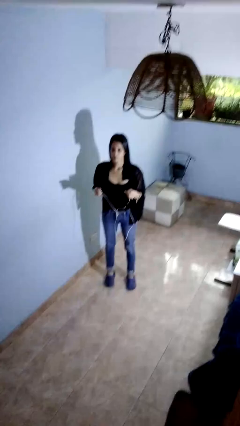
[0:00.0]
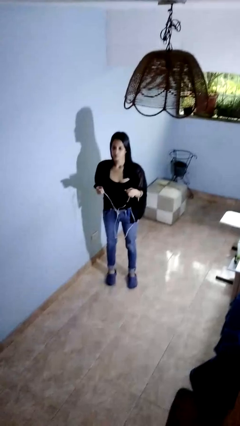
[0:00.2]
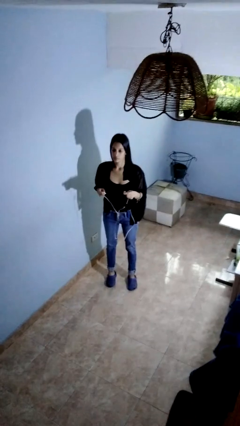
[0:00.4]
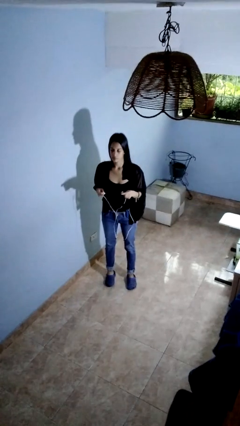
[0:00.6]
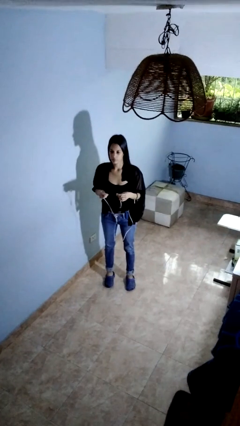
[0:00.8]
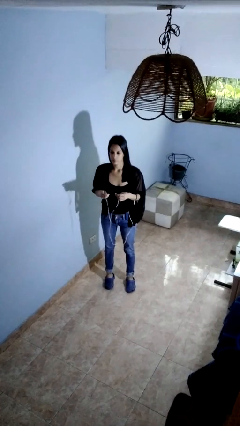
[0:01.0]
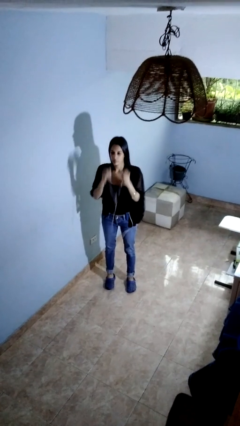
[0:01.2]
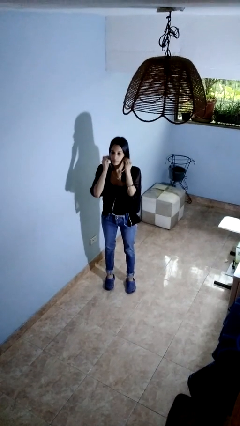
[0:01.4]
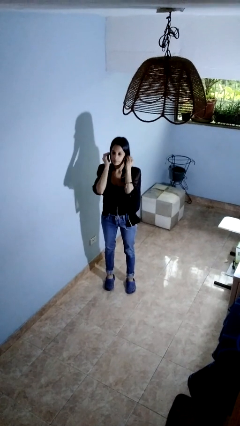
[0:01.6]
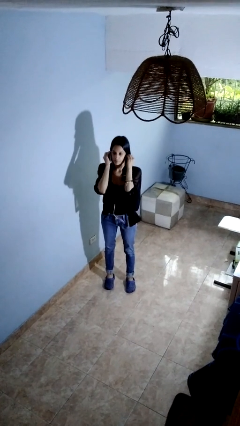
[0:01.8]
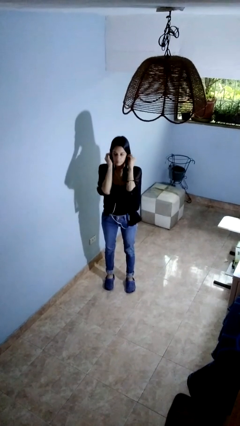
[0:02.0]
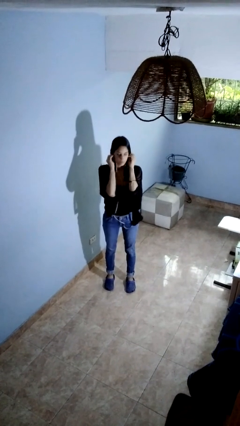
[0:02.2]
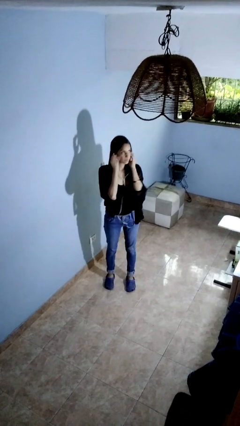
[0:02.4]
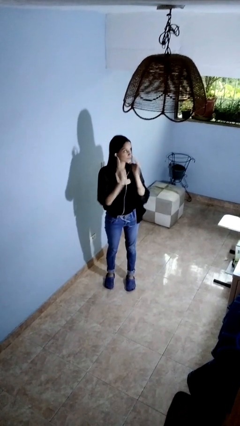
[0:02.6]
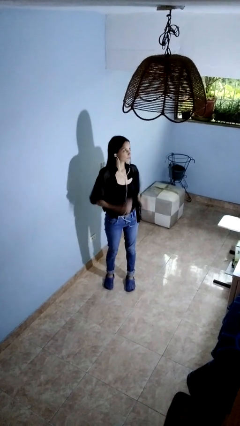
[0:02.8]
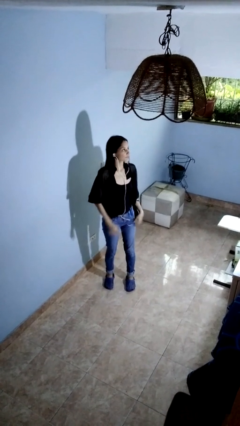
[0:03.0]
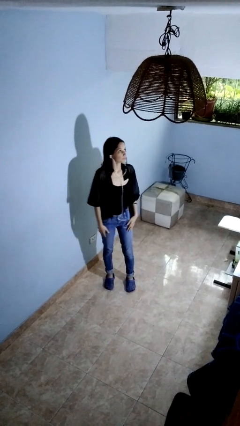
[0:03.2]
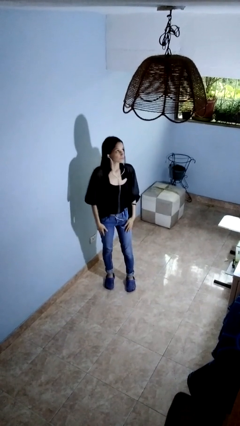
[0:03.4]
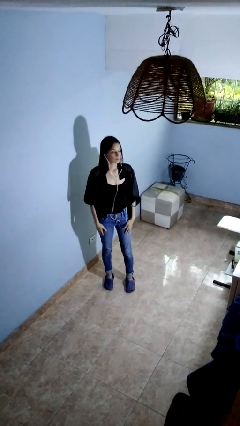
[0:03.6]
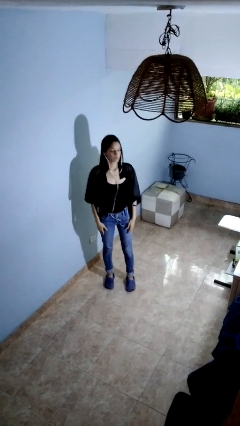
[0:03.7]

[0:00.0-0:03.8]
person puts on headphones

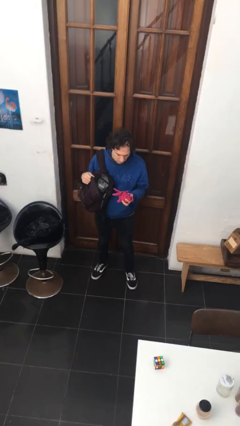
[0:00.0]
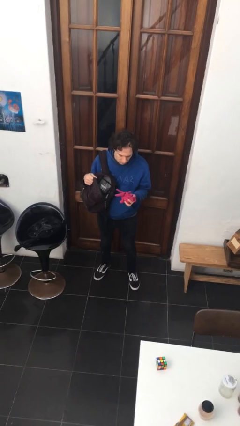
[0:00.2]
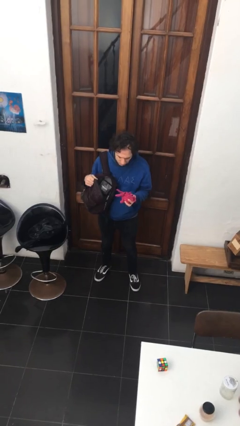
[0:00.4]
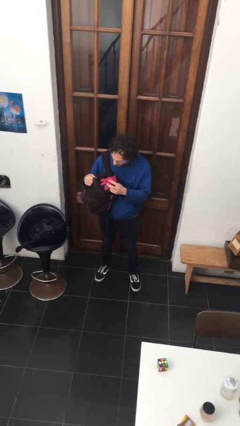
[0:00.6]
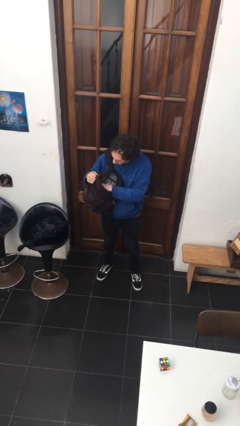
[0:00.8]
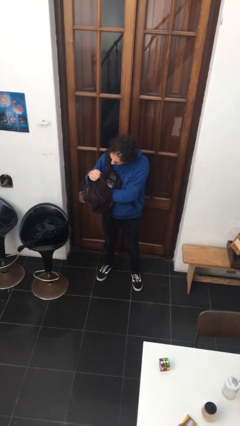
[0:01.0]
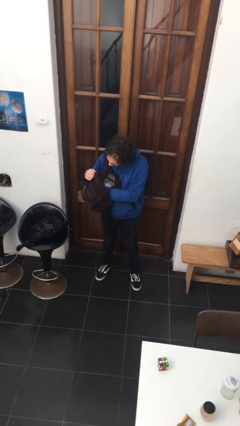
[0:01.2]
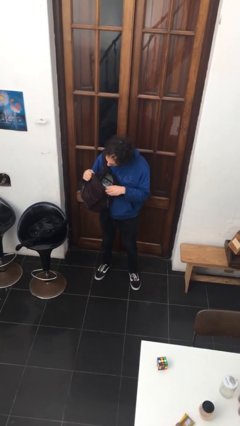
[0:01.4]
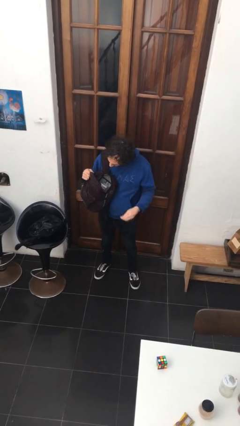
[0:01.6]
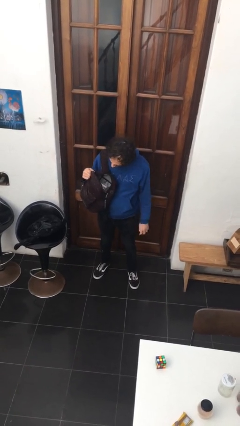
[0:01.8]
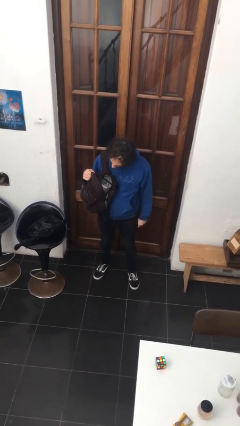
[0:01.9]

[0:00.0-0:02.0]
person puts object into backpack

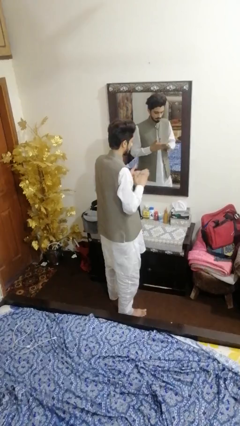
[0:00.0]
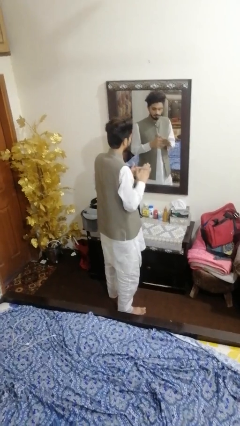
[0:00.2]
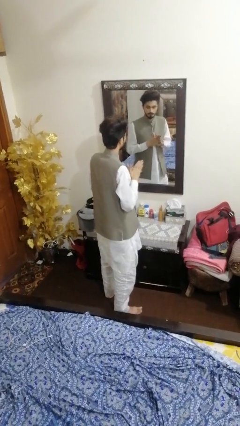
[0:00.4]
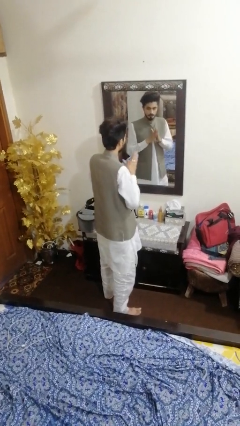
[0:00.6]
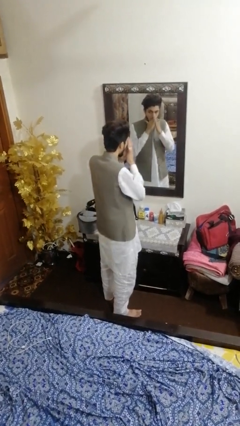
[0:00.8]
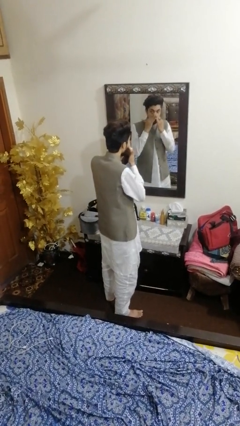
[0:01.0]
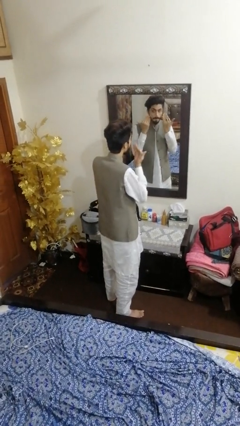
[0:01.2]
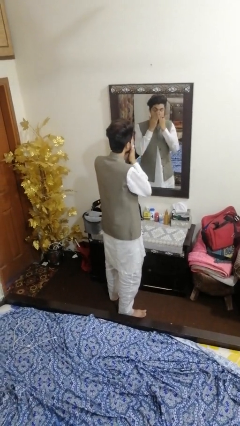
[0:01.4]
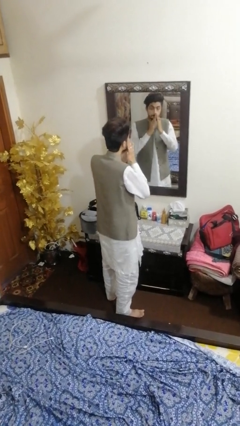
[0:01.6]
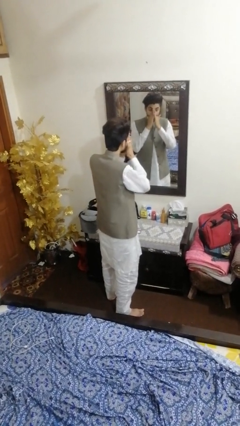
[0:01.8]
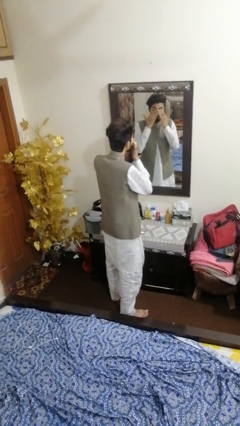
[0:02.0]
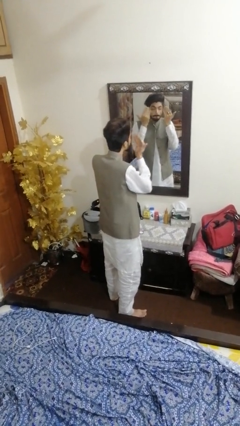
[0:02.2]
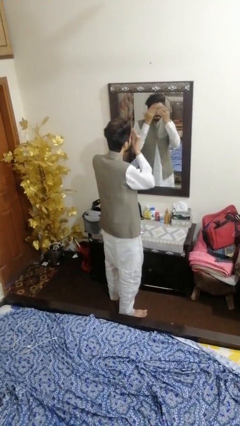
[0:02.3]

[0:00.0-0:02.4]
person applies foundation makeup

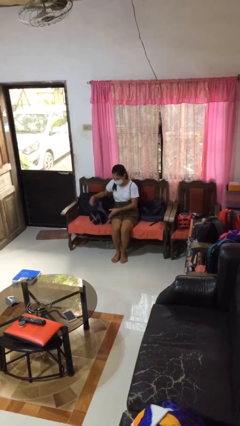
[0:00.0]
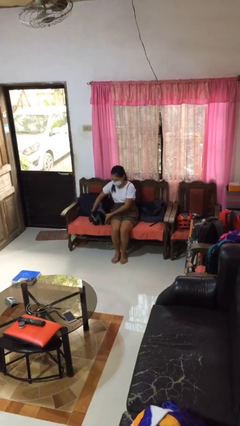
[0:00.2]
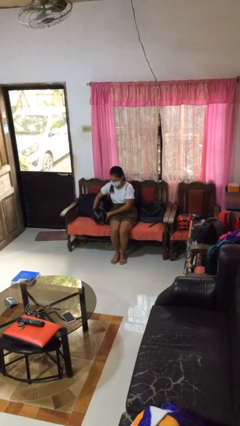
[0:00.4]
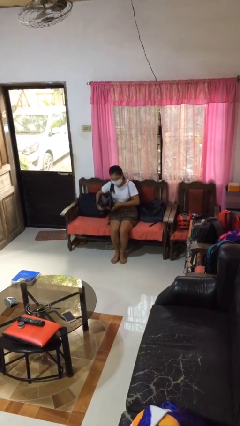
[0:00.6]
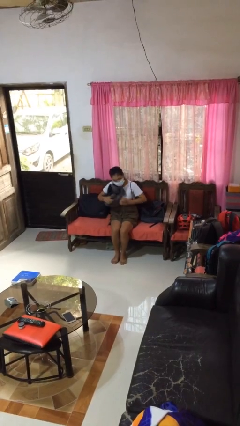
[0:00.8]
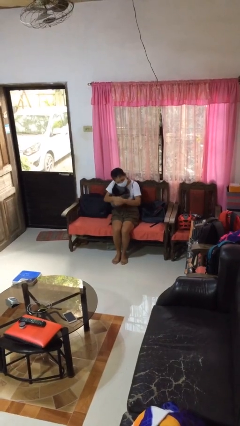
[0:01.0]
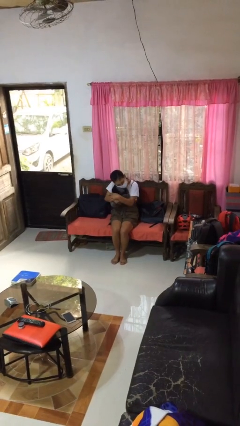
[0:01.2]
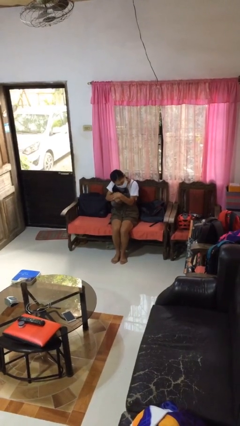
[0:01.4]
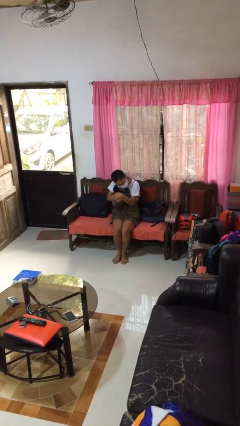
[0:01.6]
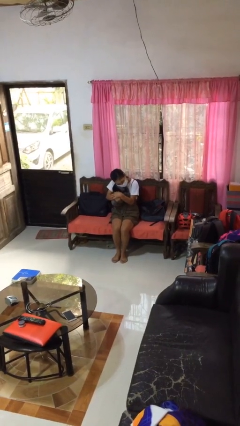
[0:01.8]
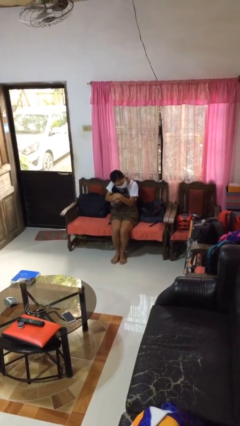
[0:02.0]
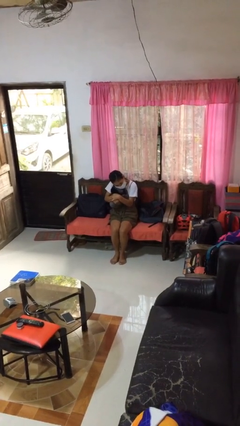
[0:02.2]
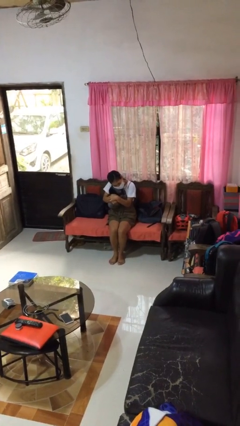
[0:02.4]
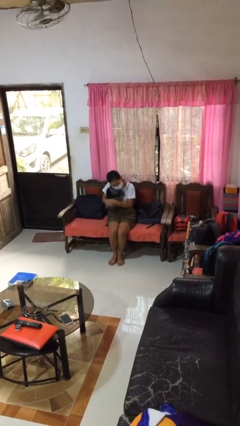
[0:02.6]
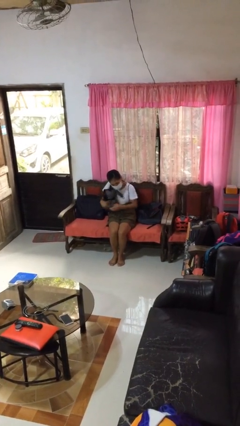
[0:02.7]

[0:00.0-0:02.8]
person hugs stuffed animal

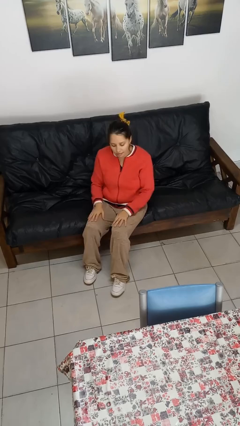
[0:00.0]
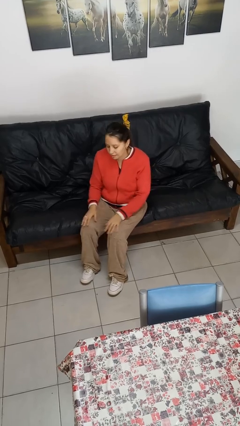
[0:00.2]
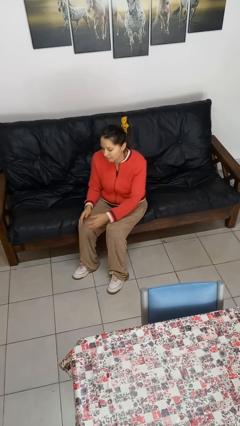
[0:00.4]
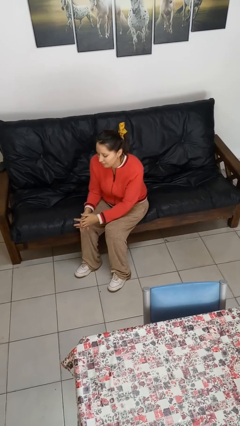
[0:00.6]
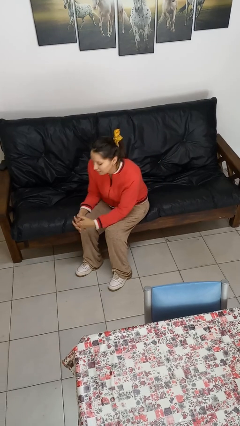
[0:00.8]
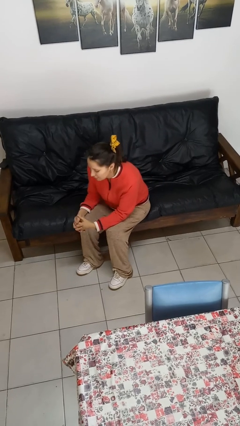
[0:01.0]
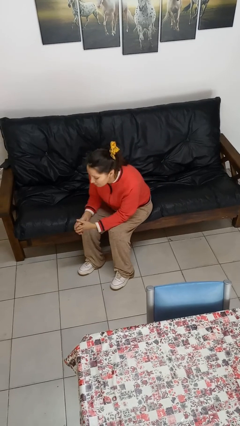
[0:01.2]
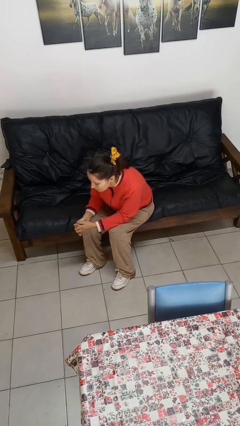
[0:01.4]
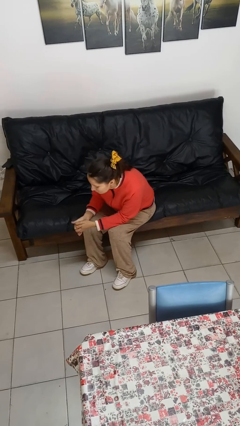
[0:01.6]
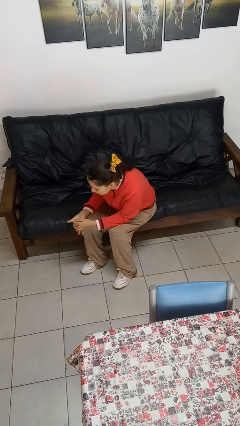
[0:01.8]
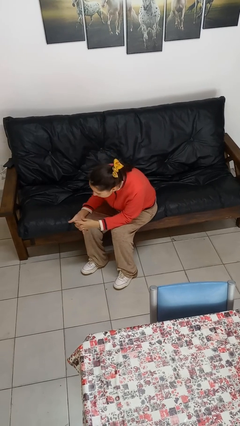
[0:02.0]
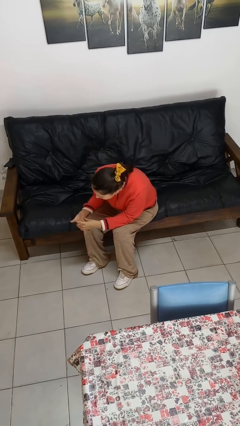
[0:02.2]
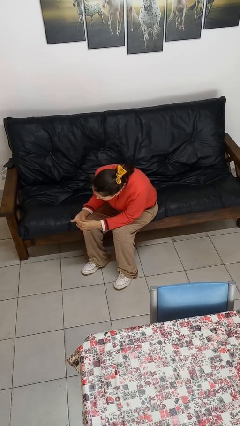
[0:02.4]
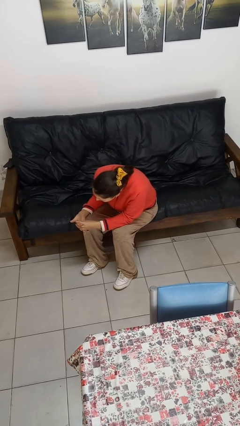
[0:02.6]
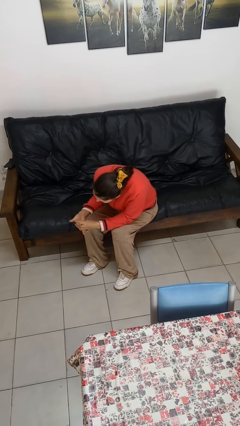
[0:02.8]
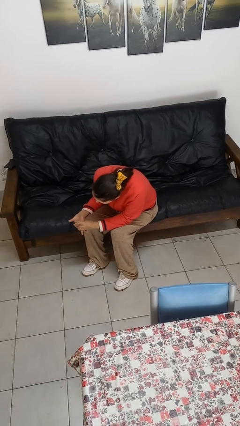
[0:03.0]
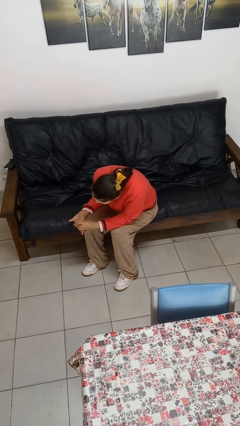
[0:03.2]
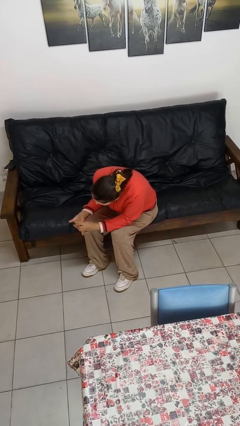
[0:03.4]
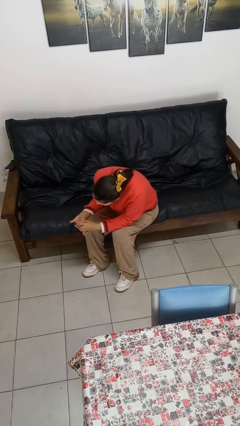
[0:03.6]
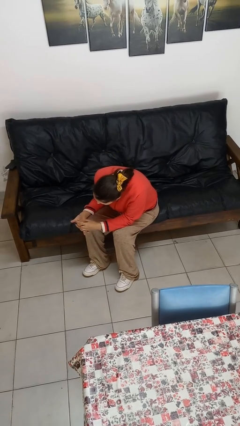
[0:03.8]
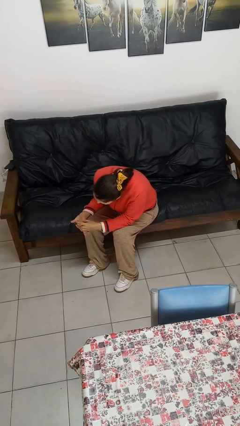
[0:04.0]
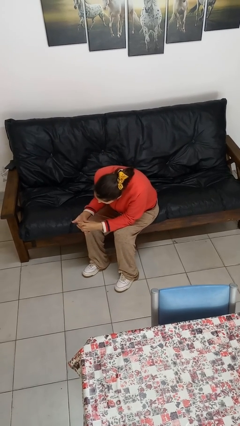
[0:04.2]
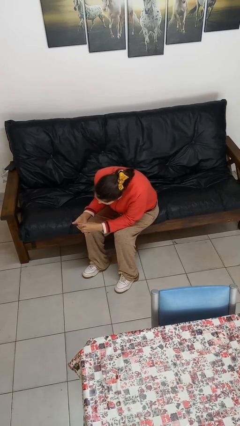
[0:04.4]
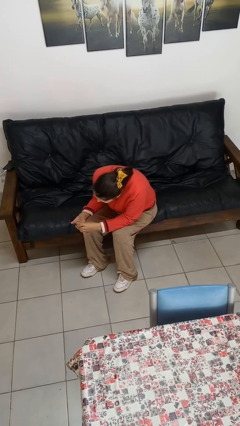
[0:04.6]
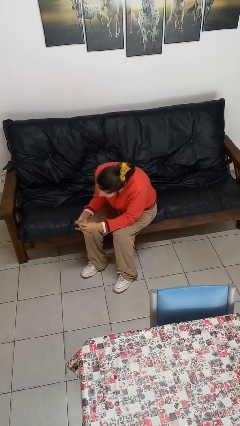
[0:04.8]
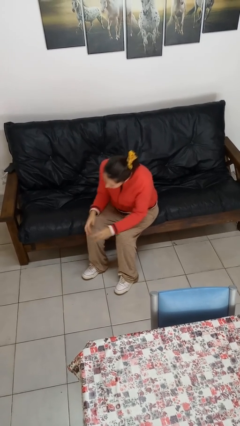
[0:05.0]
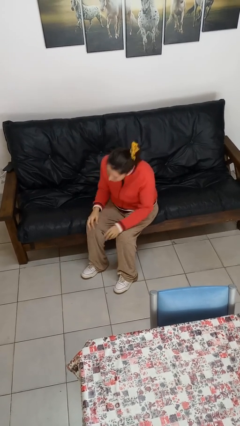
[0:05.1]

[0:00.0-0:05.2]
person looks at hands in lap

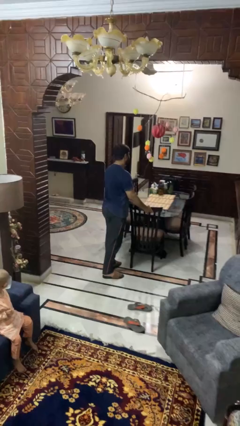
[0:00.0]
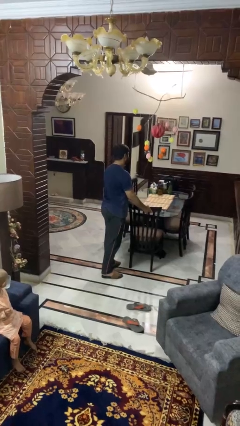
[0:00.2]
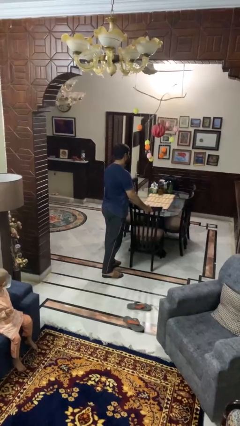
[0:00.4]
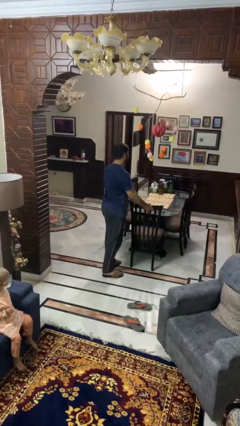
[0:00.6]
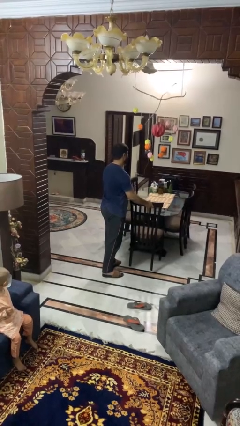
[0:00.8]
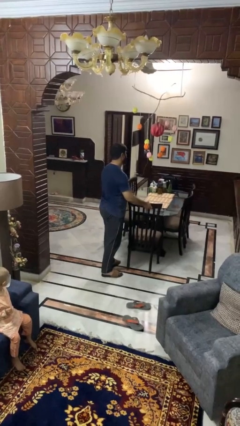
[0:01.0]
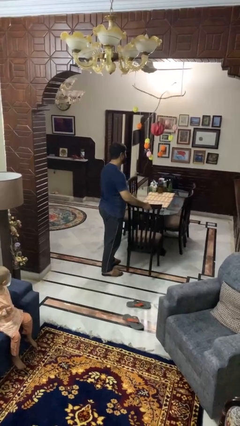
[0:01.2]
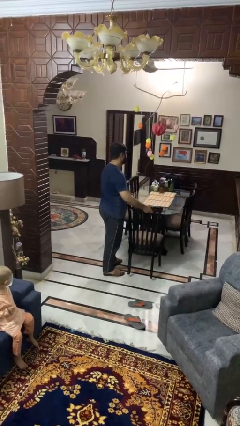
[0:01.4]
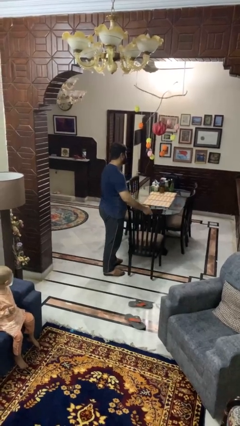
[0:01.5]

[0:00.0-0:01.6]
person pulls out chair
